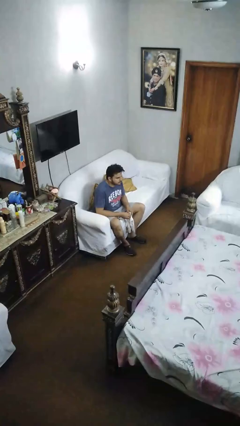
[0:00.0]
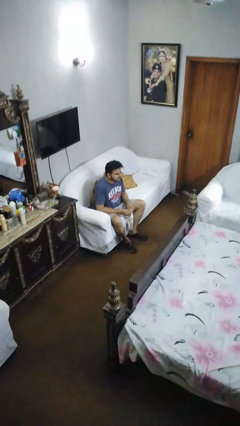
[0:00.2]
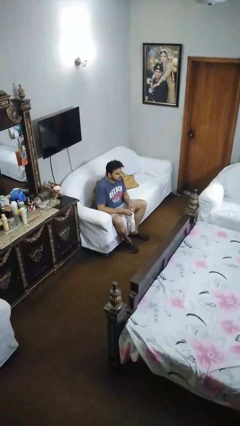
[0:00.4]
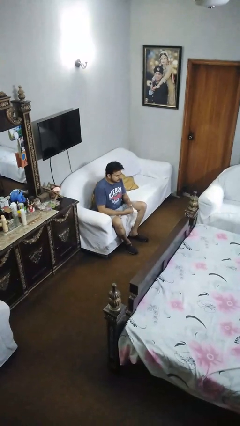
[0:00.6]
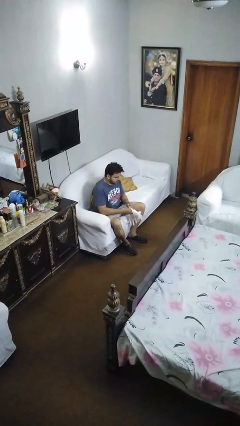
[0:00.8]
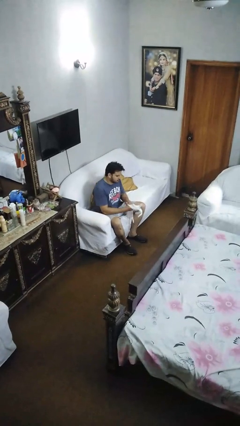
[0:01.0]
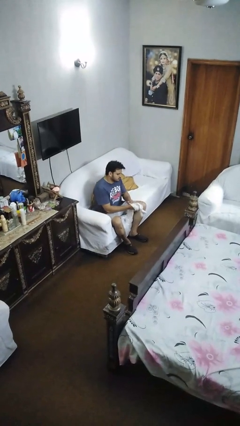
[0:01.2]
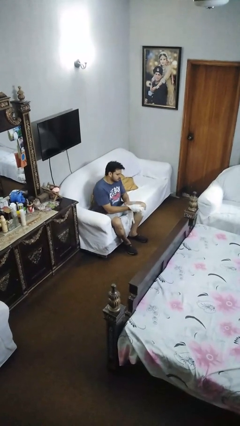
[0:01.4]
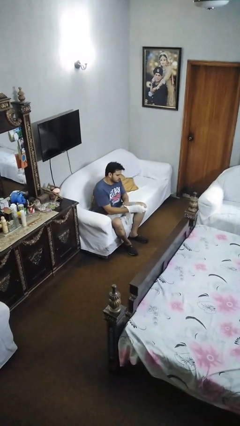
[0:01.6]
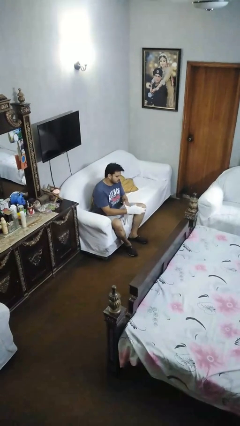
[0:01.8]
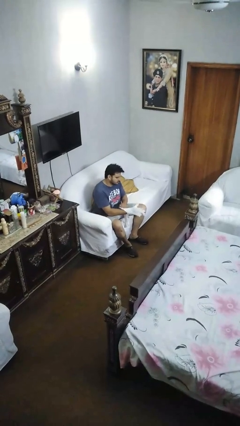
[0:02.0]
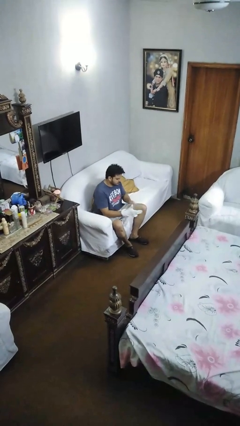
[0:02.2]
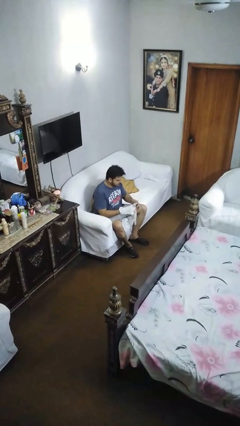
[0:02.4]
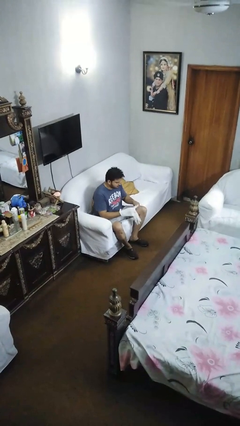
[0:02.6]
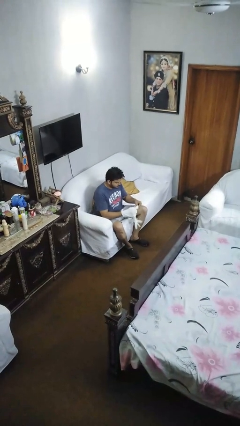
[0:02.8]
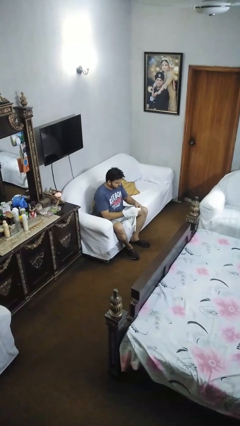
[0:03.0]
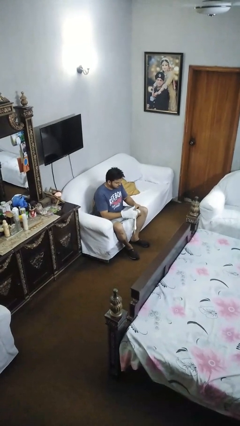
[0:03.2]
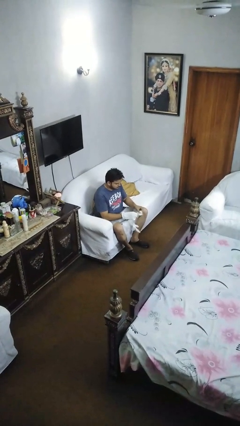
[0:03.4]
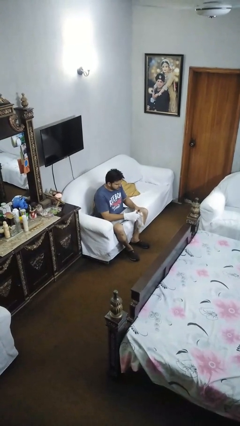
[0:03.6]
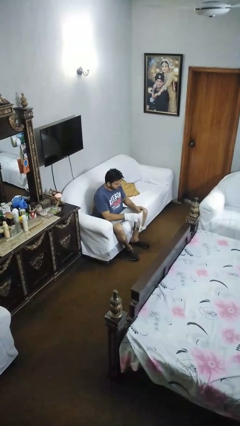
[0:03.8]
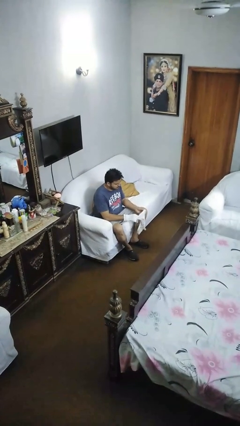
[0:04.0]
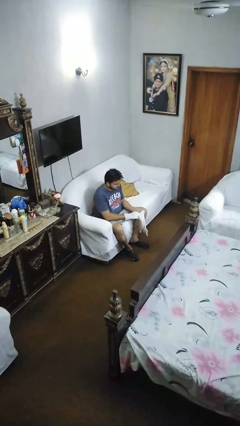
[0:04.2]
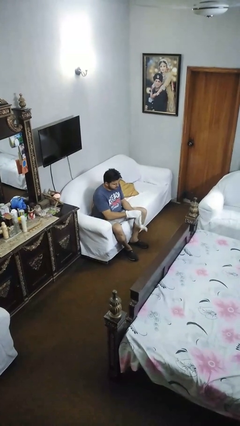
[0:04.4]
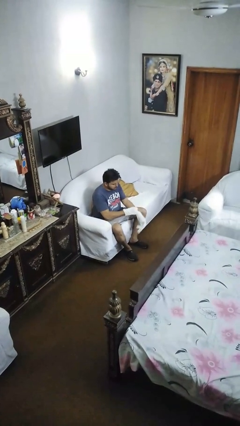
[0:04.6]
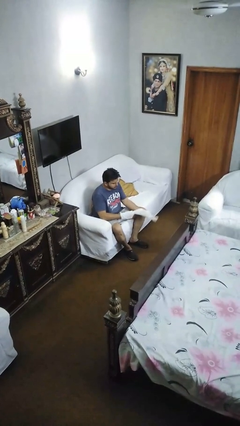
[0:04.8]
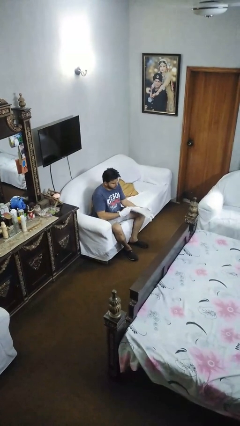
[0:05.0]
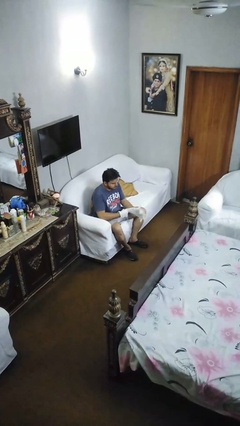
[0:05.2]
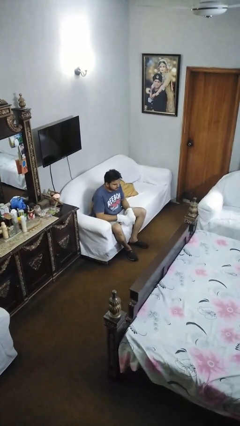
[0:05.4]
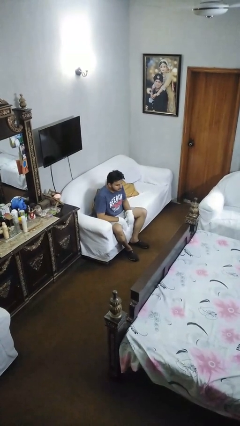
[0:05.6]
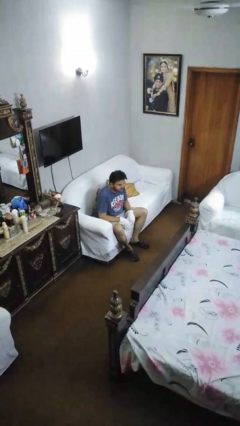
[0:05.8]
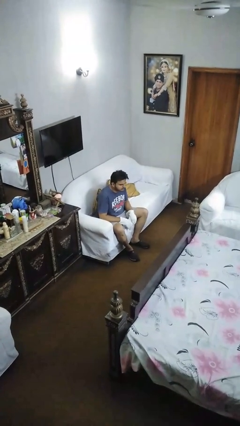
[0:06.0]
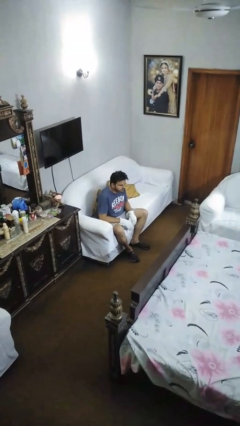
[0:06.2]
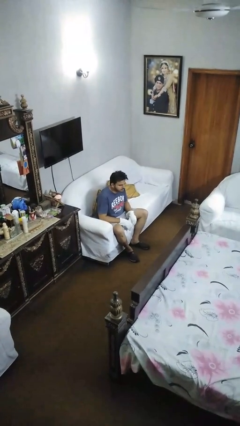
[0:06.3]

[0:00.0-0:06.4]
person puts on gloves

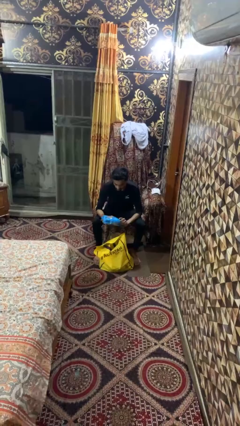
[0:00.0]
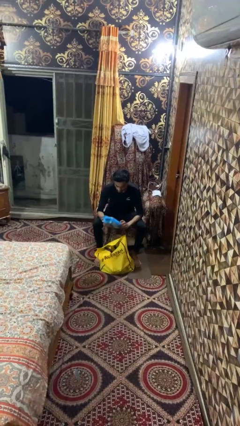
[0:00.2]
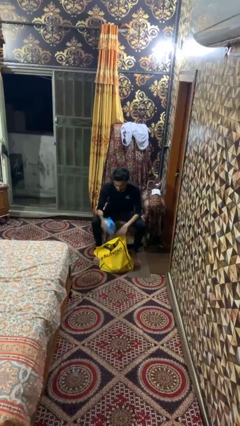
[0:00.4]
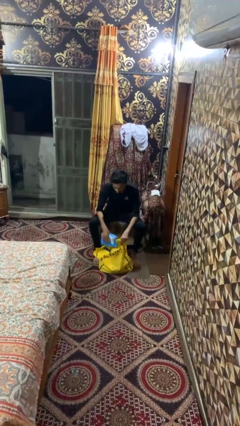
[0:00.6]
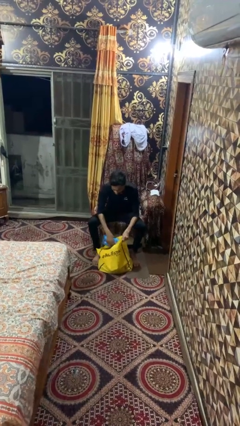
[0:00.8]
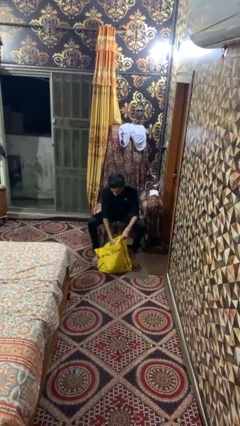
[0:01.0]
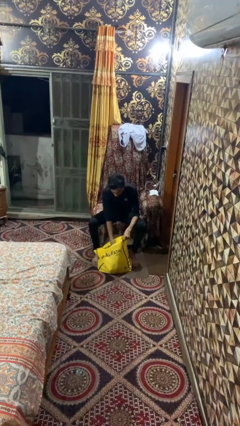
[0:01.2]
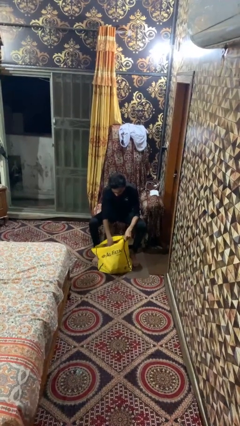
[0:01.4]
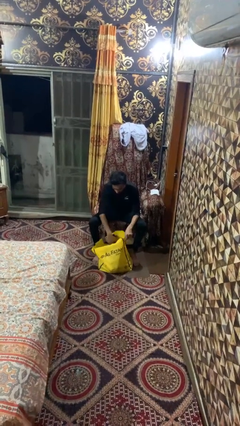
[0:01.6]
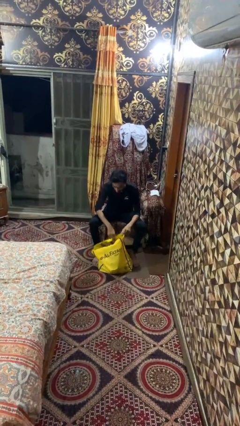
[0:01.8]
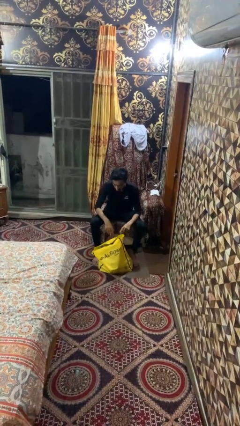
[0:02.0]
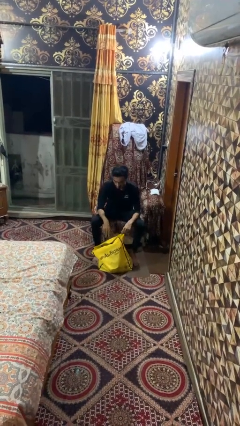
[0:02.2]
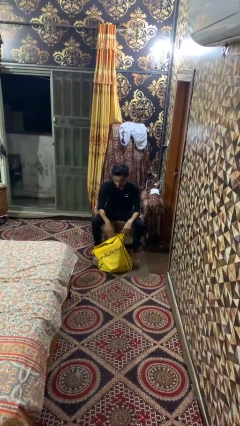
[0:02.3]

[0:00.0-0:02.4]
person puts object into bag

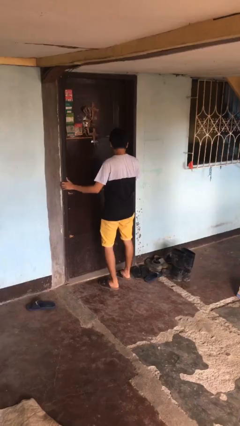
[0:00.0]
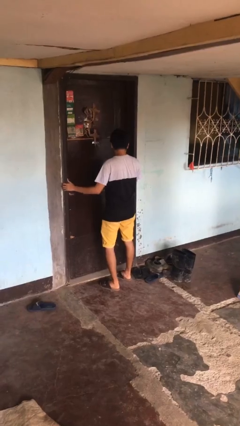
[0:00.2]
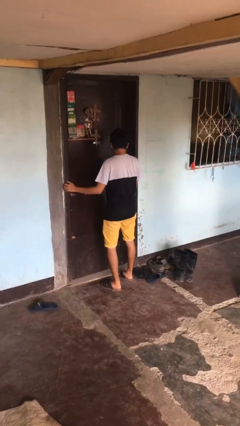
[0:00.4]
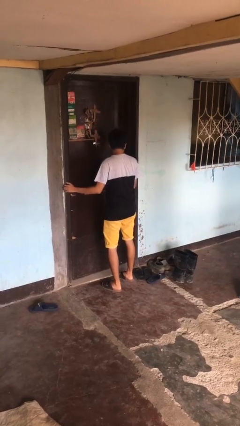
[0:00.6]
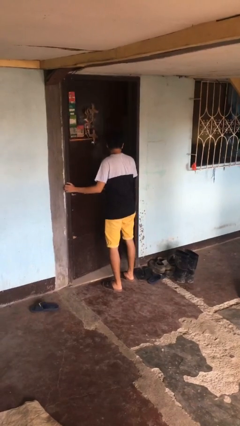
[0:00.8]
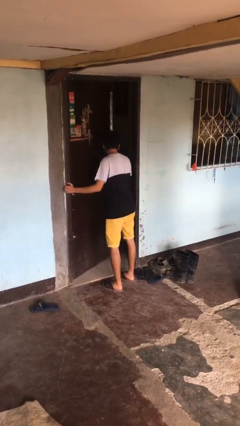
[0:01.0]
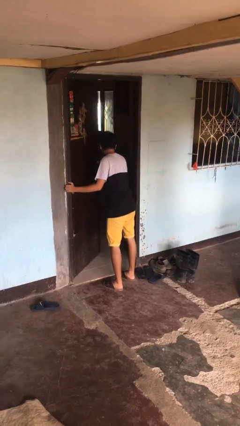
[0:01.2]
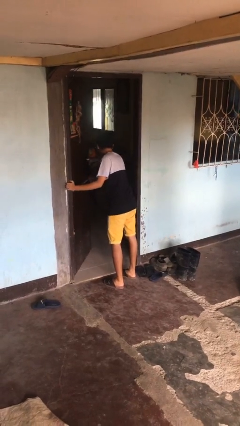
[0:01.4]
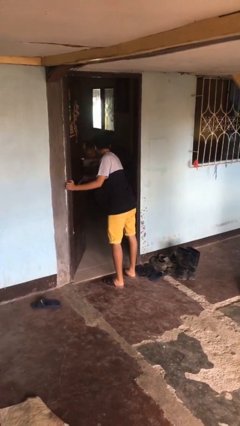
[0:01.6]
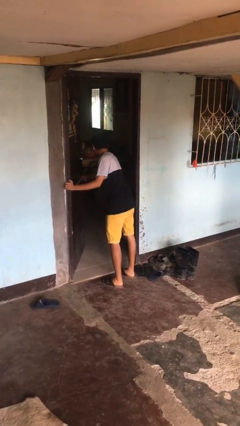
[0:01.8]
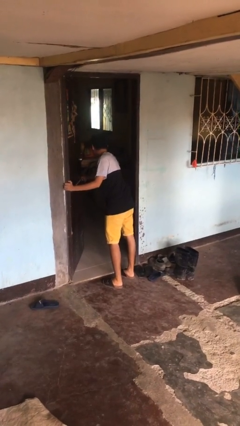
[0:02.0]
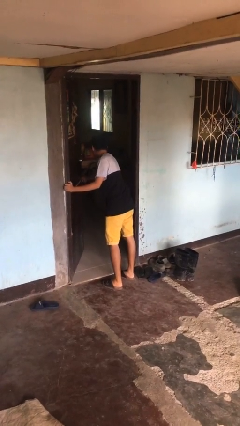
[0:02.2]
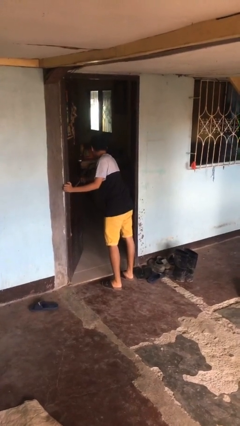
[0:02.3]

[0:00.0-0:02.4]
person opens facility door

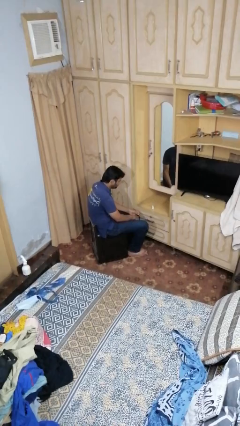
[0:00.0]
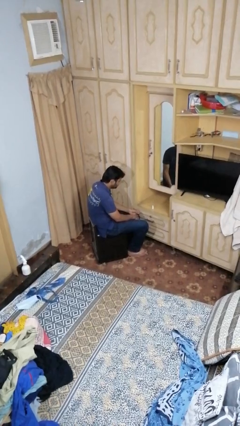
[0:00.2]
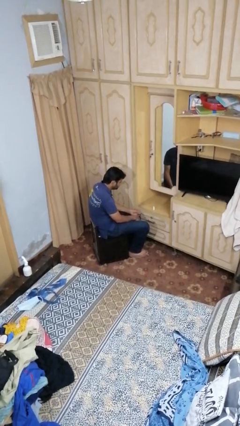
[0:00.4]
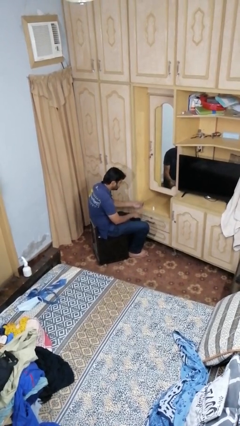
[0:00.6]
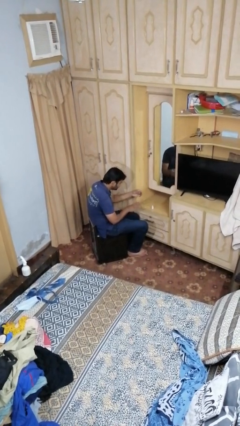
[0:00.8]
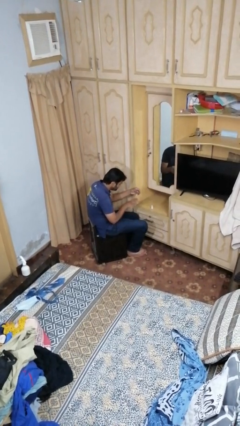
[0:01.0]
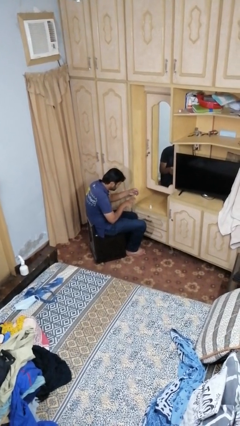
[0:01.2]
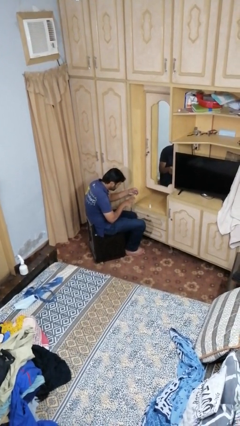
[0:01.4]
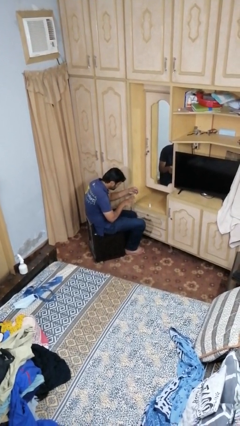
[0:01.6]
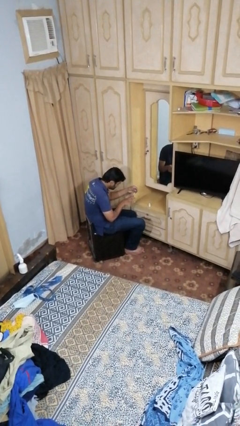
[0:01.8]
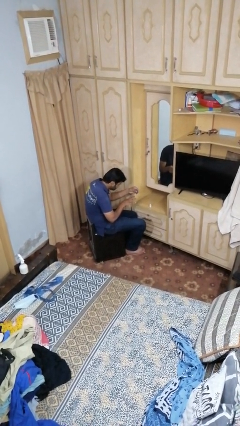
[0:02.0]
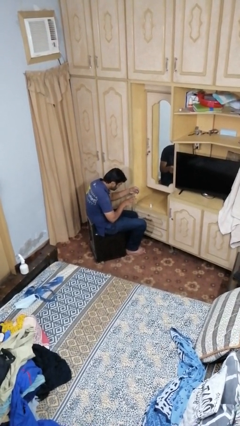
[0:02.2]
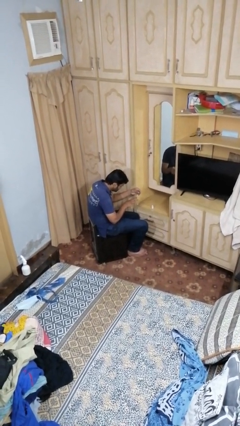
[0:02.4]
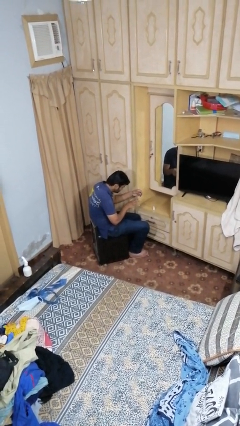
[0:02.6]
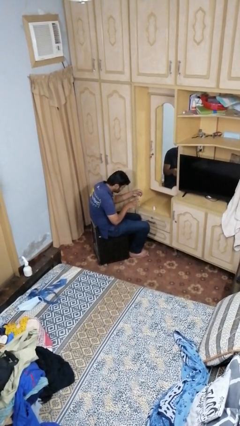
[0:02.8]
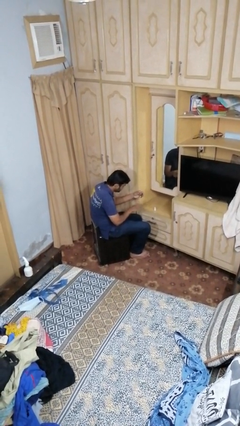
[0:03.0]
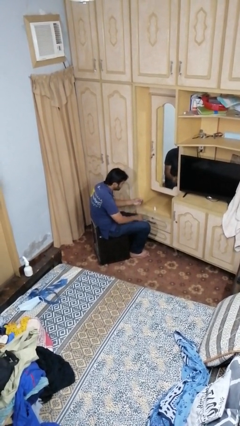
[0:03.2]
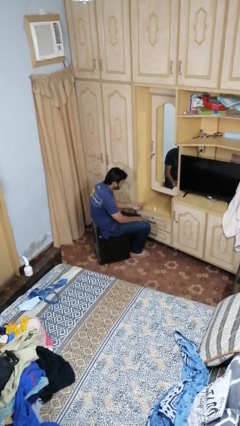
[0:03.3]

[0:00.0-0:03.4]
person paints fingernails

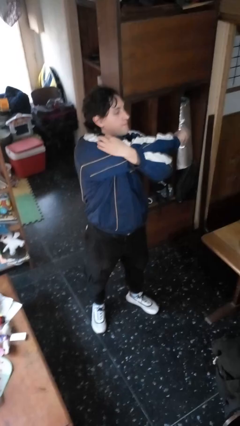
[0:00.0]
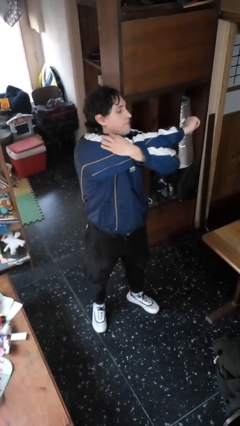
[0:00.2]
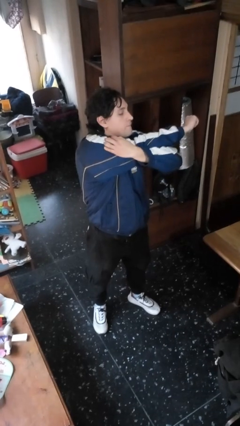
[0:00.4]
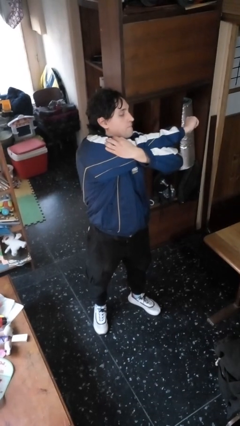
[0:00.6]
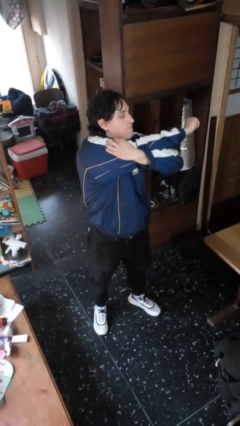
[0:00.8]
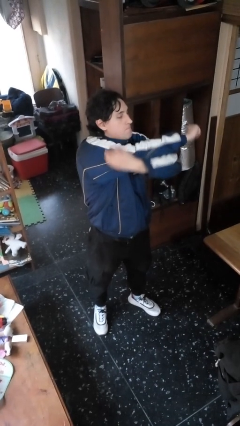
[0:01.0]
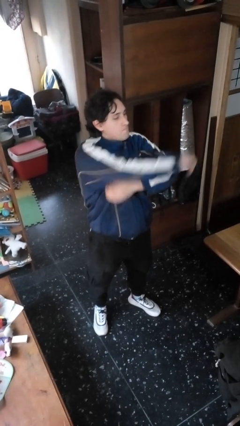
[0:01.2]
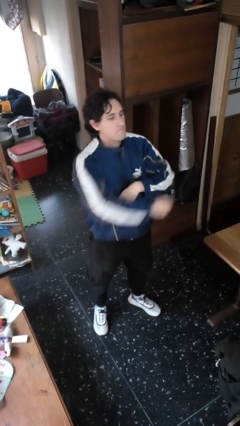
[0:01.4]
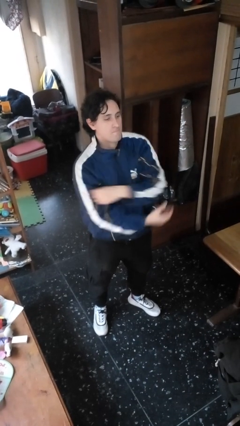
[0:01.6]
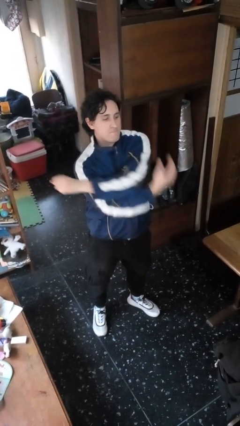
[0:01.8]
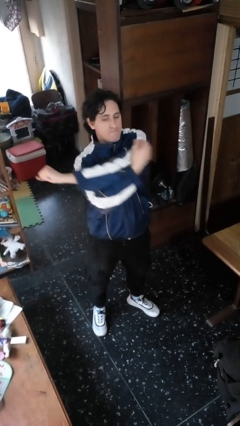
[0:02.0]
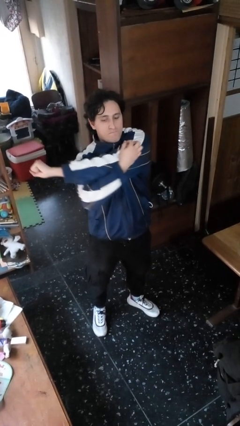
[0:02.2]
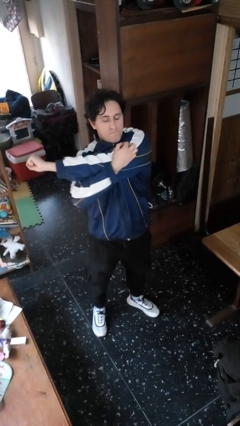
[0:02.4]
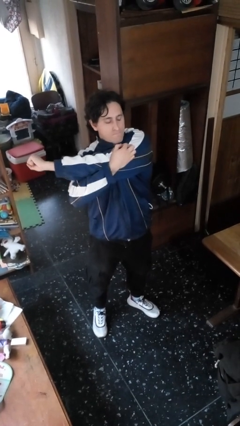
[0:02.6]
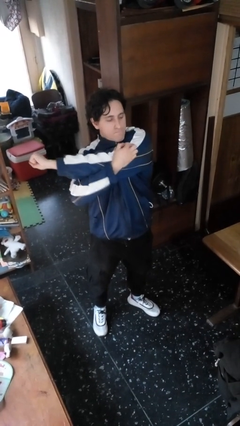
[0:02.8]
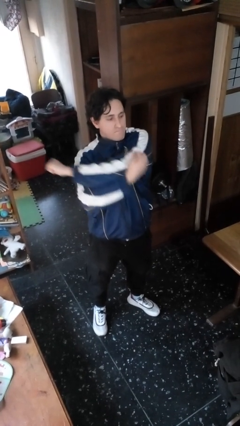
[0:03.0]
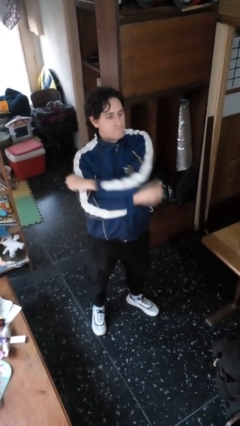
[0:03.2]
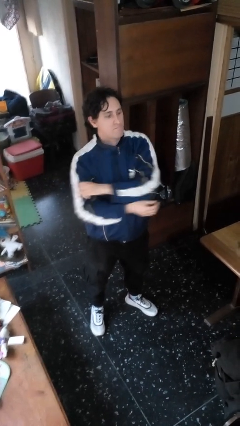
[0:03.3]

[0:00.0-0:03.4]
person stretches arms to side
